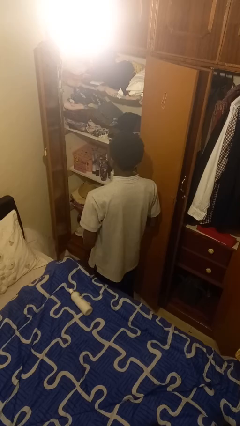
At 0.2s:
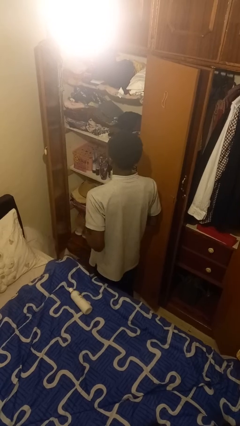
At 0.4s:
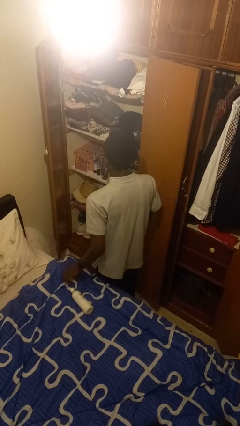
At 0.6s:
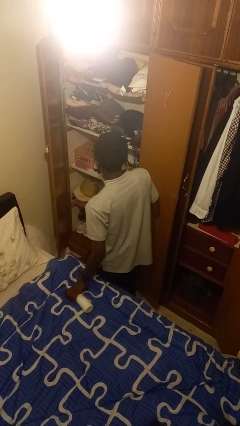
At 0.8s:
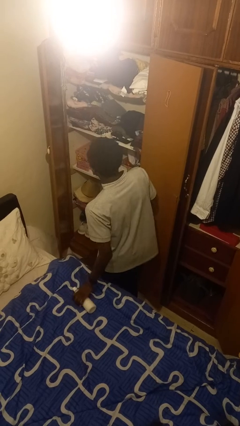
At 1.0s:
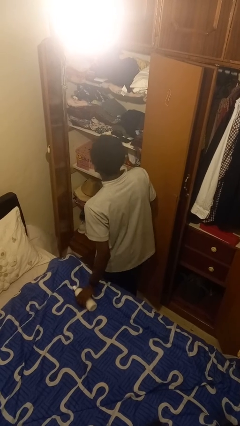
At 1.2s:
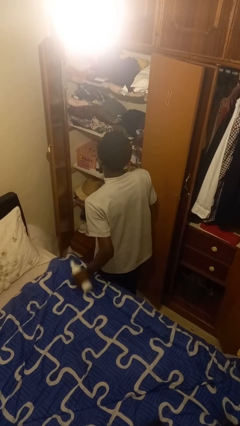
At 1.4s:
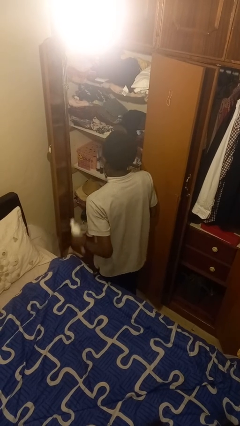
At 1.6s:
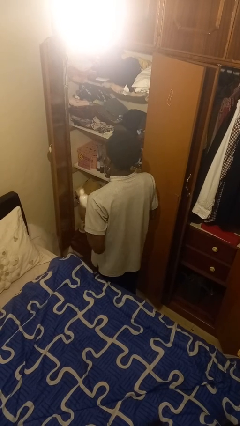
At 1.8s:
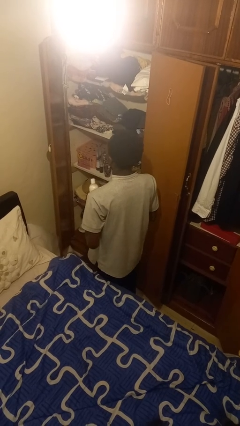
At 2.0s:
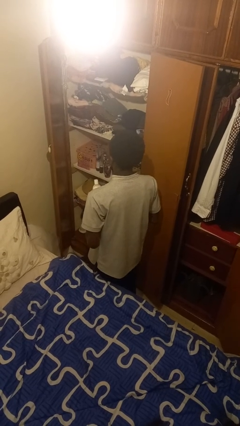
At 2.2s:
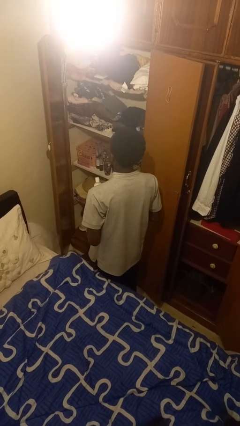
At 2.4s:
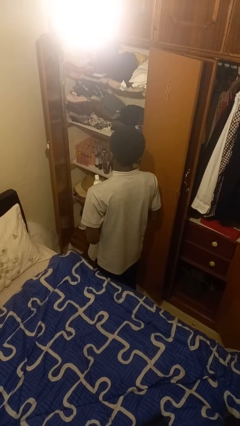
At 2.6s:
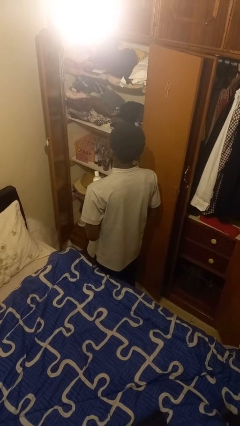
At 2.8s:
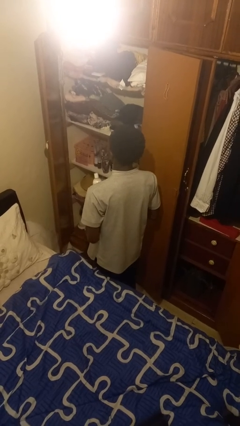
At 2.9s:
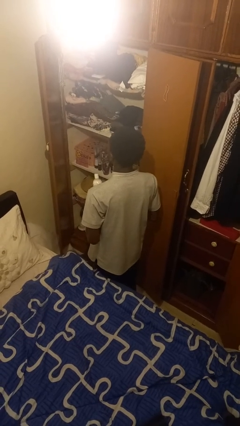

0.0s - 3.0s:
person picks up object from bed

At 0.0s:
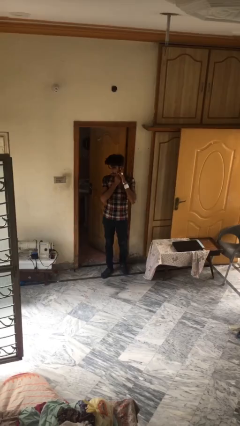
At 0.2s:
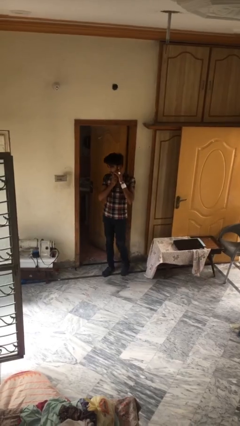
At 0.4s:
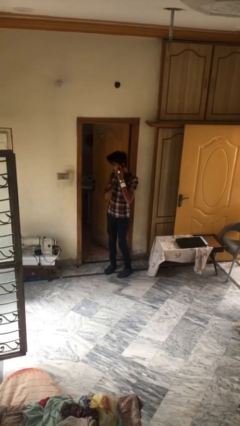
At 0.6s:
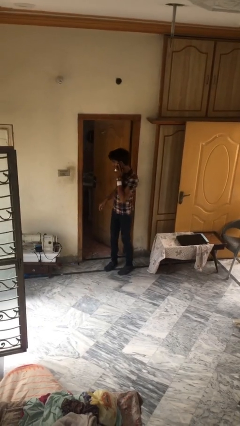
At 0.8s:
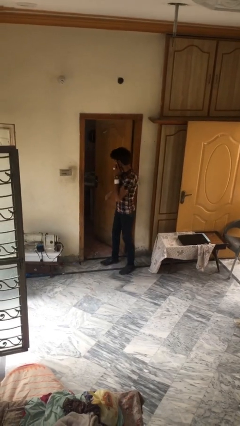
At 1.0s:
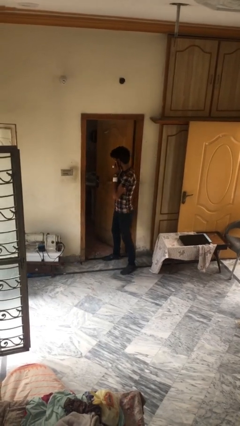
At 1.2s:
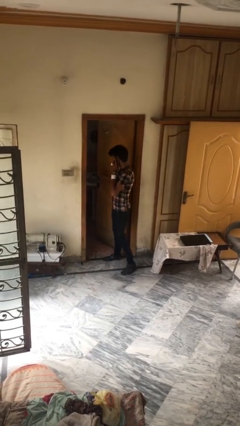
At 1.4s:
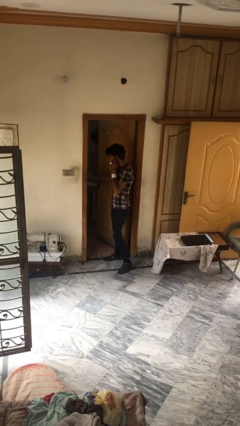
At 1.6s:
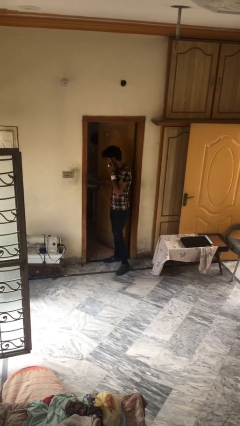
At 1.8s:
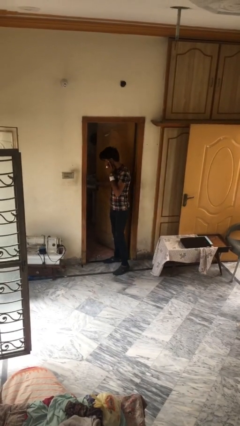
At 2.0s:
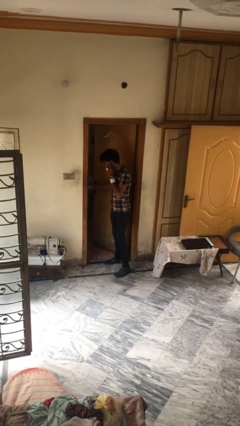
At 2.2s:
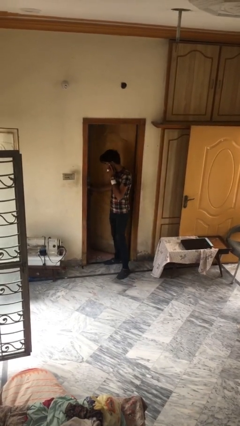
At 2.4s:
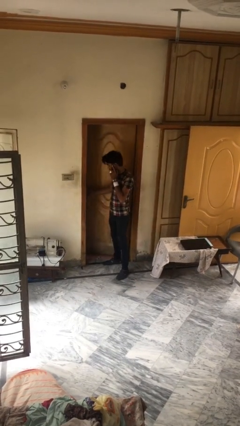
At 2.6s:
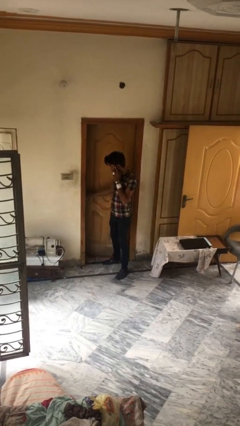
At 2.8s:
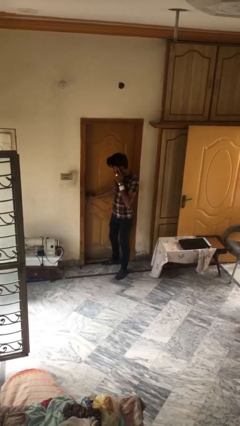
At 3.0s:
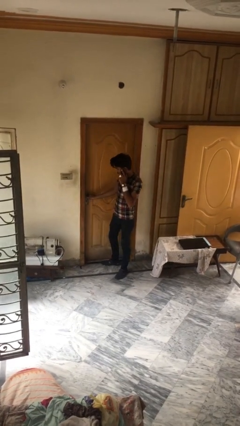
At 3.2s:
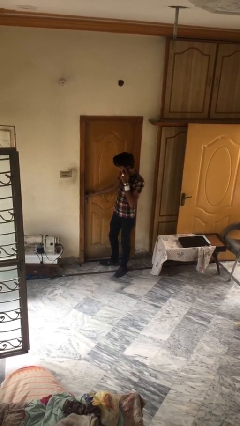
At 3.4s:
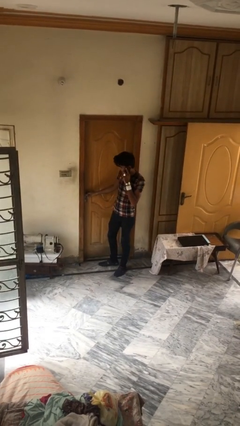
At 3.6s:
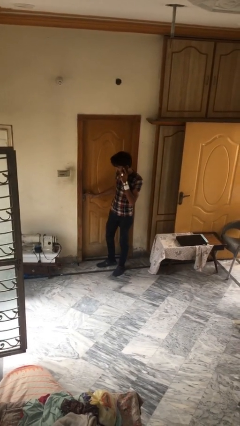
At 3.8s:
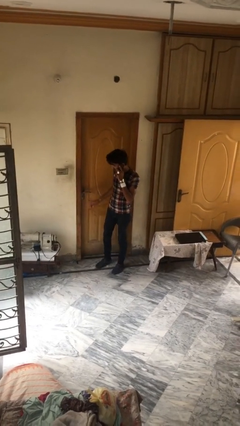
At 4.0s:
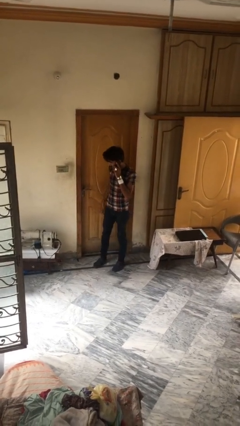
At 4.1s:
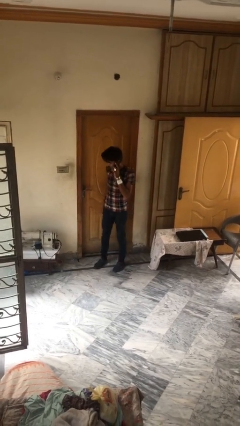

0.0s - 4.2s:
person closes facility door

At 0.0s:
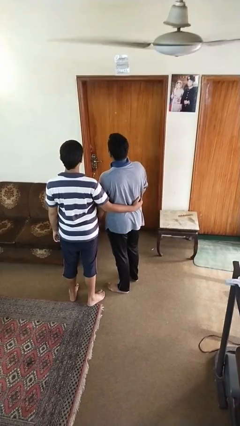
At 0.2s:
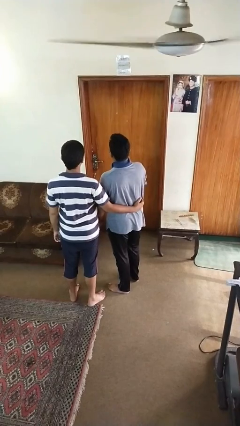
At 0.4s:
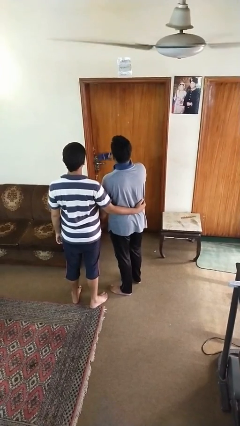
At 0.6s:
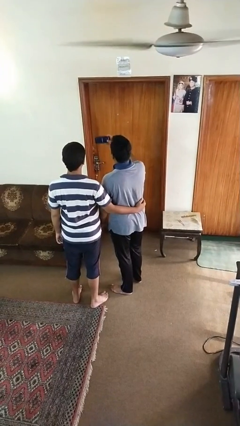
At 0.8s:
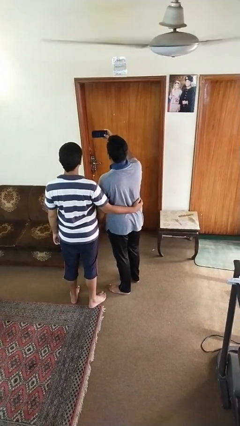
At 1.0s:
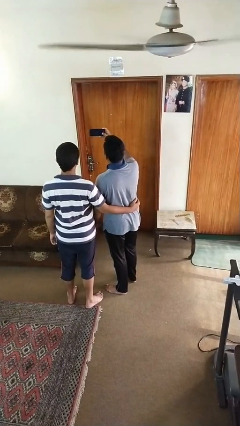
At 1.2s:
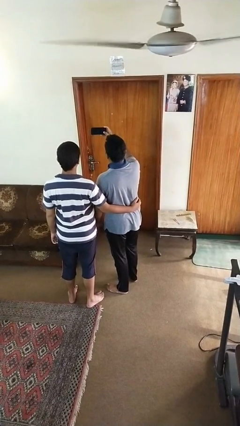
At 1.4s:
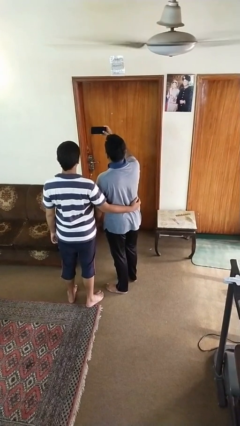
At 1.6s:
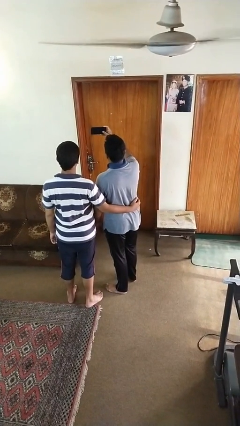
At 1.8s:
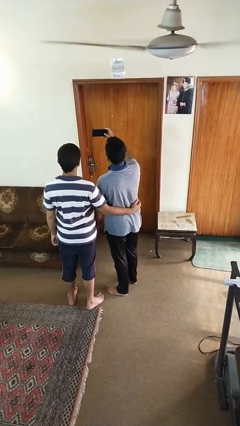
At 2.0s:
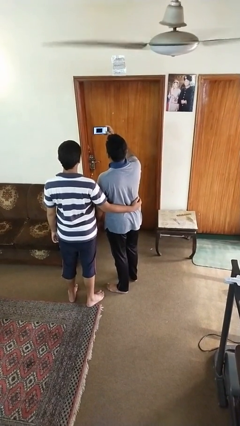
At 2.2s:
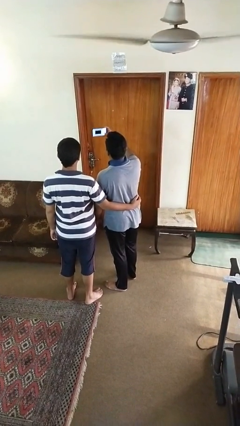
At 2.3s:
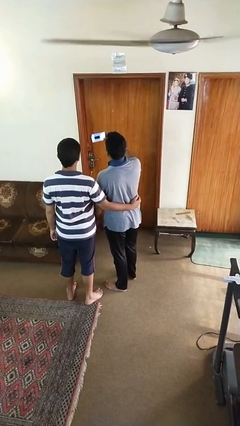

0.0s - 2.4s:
person takes selfie with person

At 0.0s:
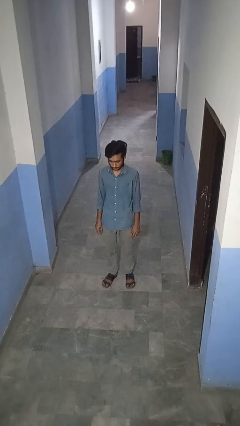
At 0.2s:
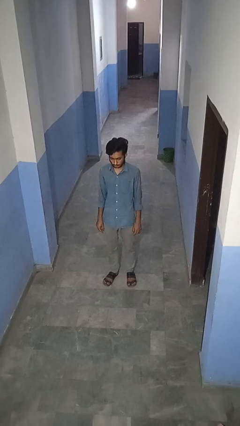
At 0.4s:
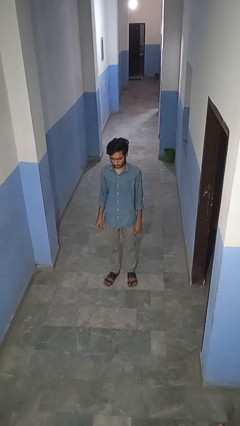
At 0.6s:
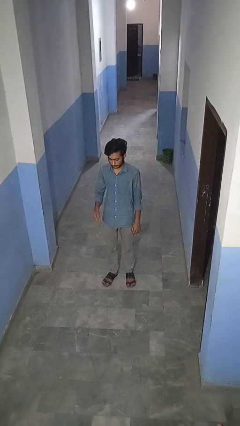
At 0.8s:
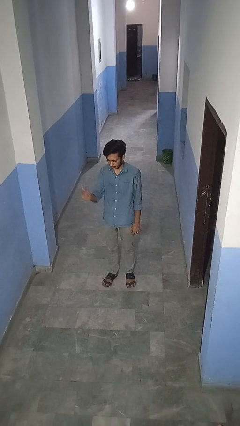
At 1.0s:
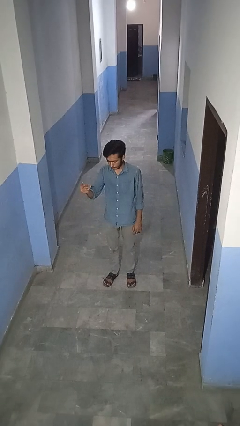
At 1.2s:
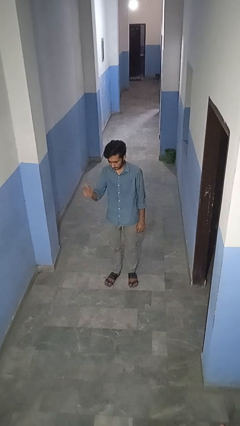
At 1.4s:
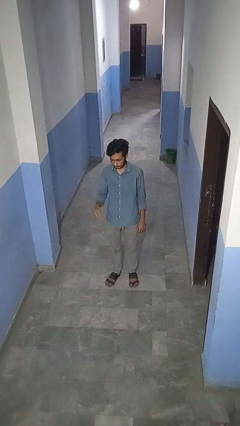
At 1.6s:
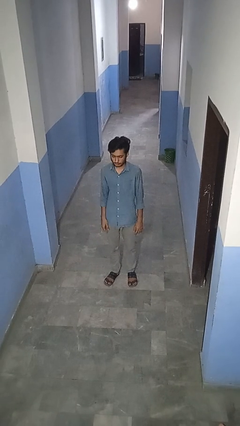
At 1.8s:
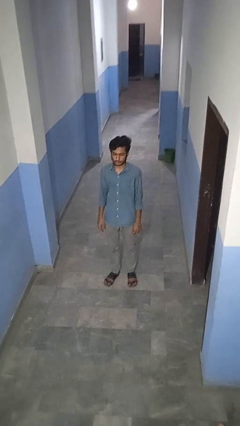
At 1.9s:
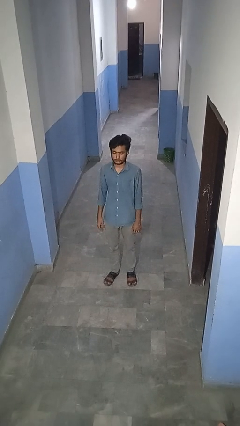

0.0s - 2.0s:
person snaps fingers

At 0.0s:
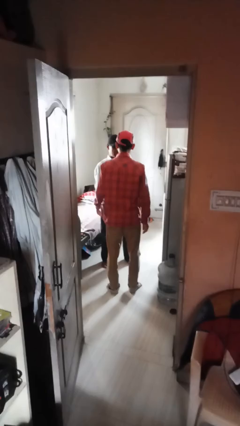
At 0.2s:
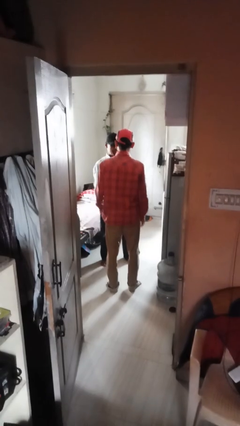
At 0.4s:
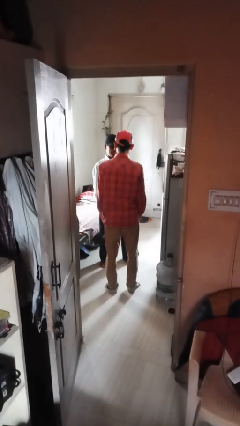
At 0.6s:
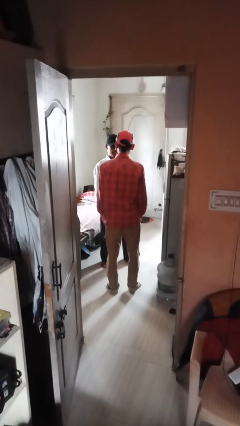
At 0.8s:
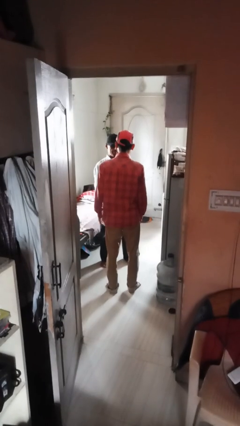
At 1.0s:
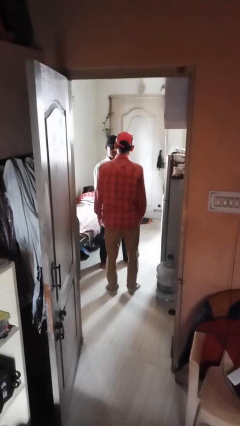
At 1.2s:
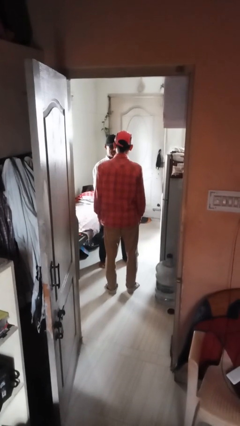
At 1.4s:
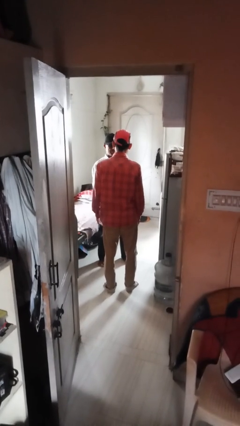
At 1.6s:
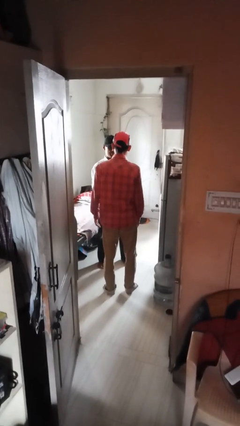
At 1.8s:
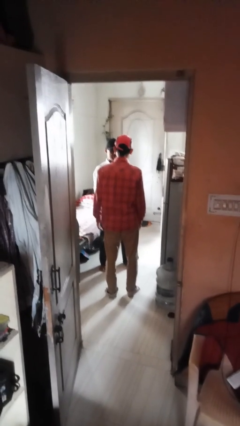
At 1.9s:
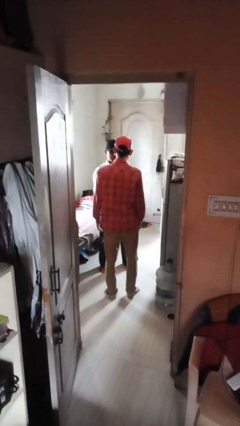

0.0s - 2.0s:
person spins person around

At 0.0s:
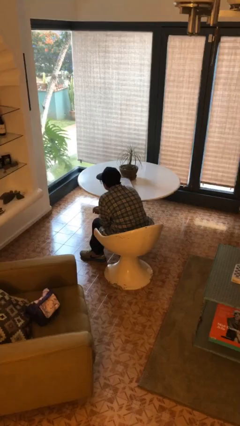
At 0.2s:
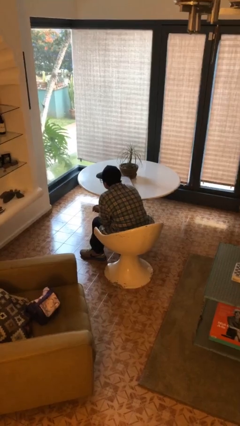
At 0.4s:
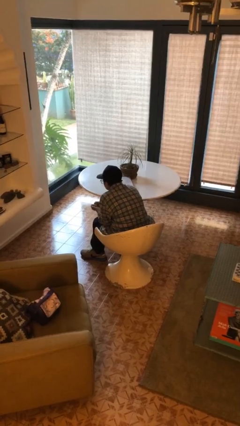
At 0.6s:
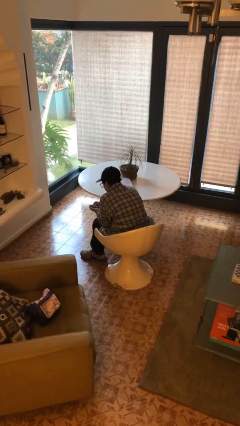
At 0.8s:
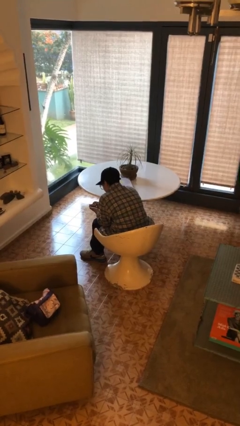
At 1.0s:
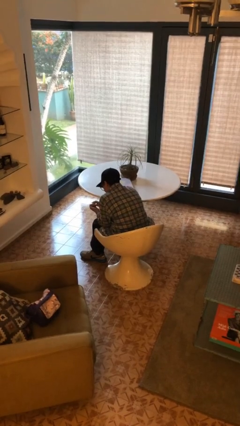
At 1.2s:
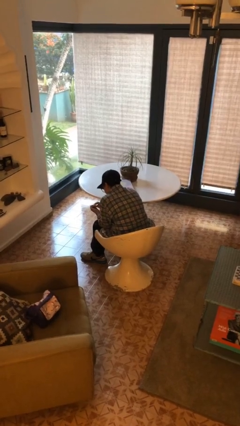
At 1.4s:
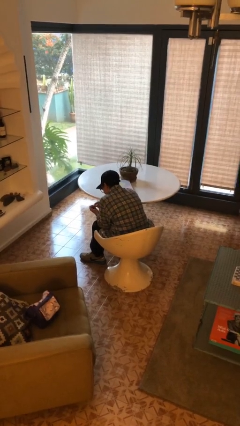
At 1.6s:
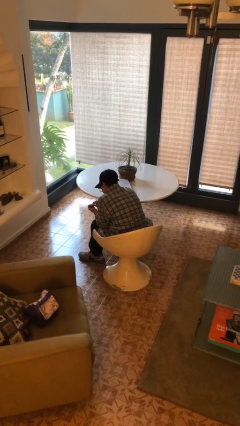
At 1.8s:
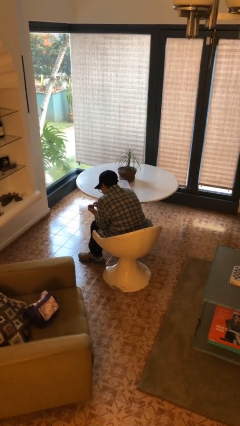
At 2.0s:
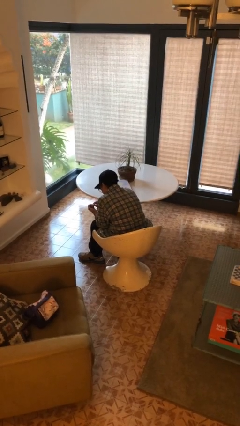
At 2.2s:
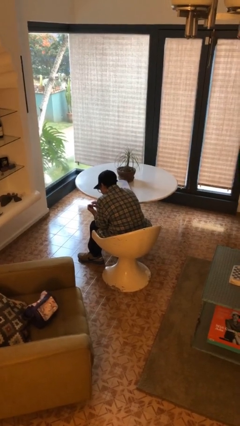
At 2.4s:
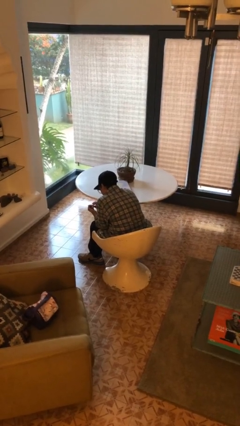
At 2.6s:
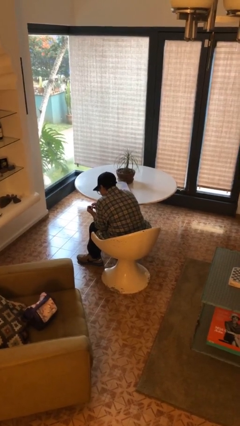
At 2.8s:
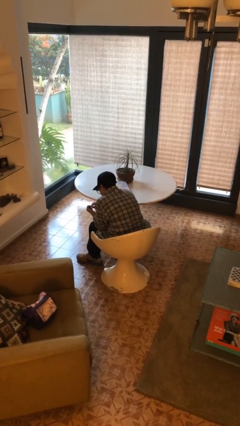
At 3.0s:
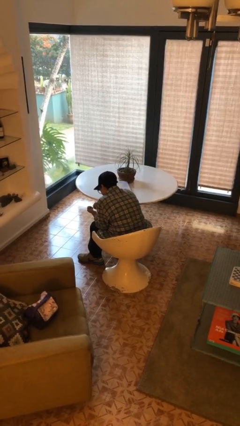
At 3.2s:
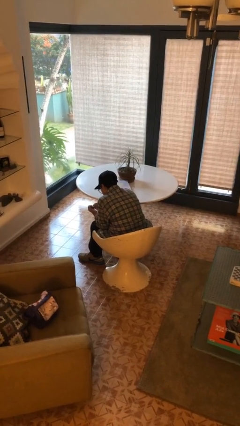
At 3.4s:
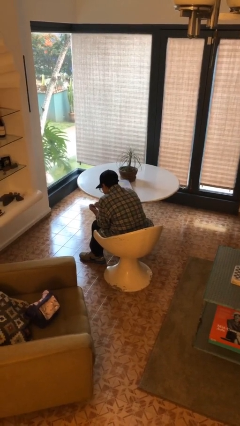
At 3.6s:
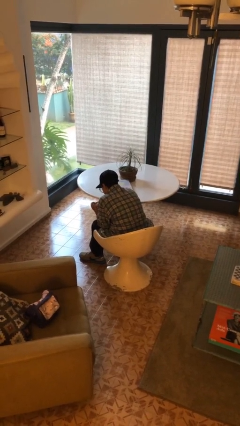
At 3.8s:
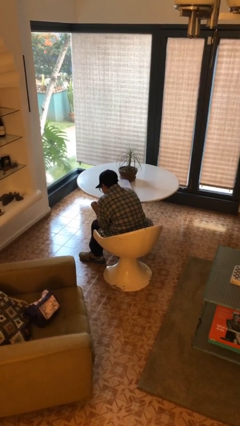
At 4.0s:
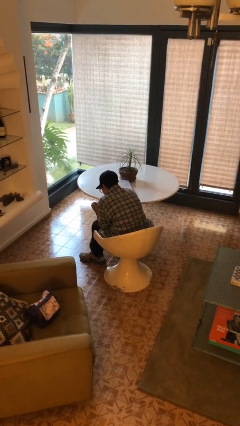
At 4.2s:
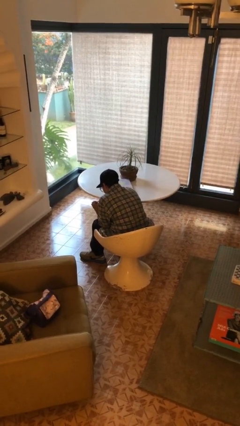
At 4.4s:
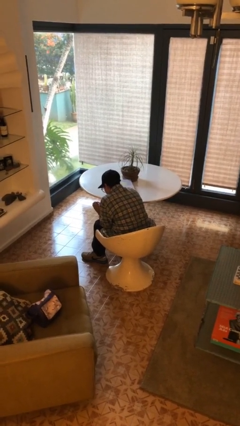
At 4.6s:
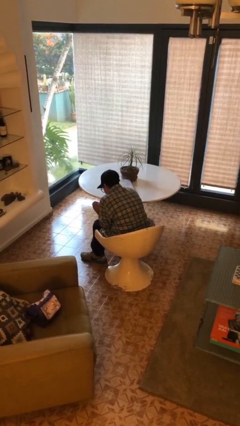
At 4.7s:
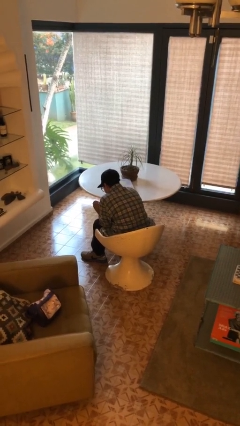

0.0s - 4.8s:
person looks at hands in lap
